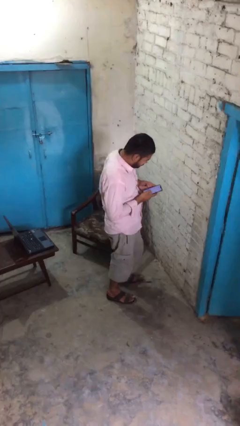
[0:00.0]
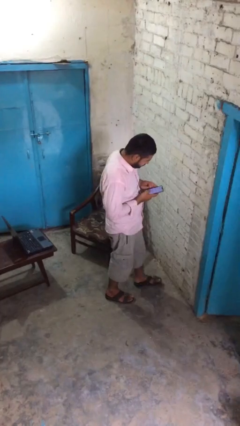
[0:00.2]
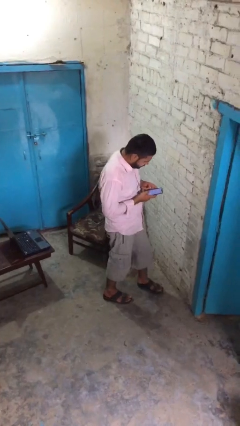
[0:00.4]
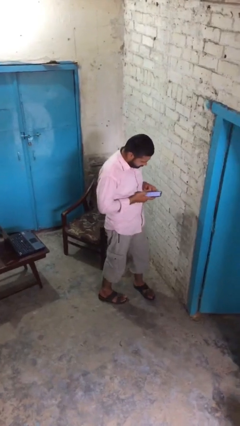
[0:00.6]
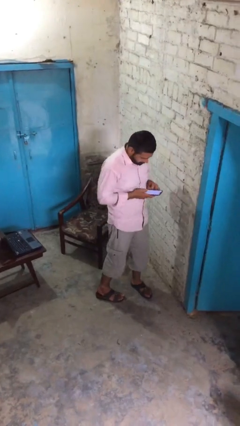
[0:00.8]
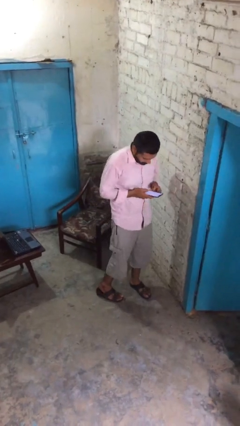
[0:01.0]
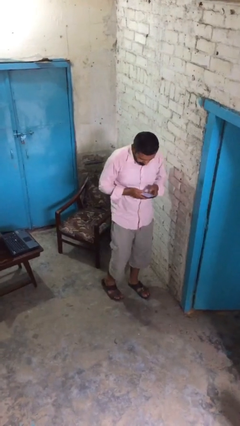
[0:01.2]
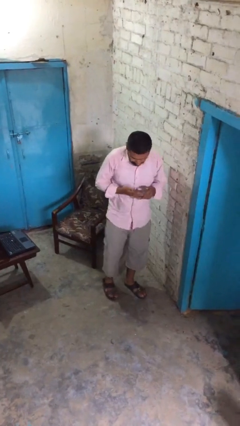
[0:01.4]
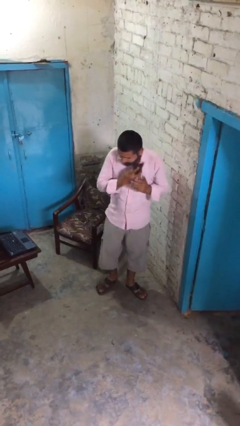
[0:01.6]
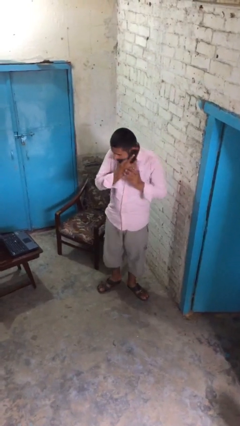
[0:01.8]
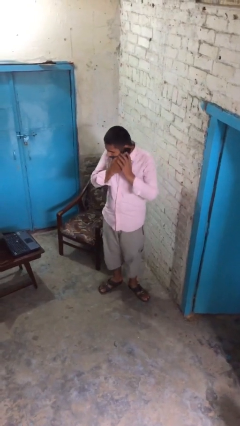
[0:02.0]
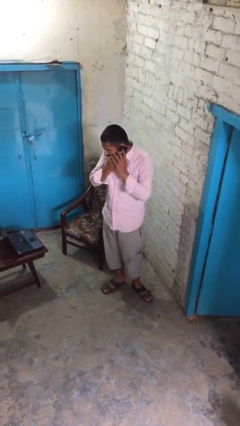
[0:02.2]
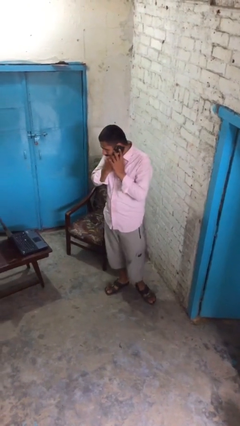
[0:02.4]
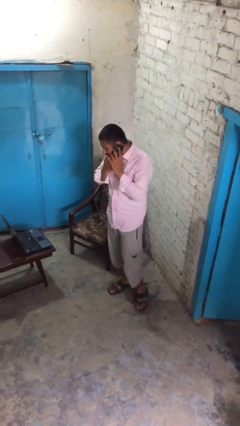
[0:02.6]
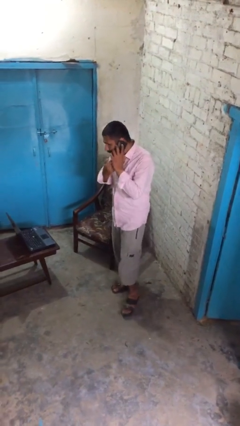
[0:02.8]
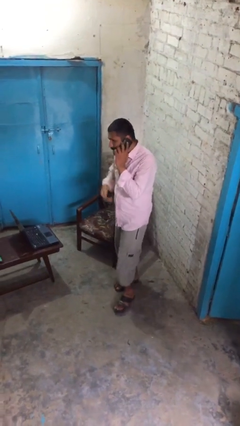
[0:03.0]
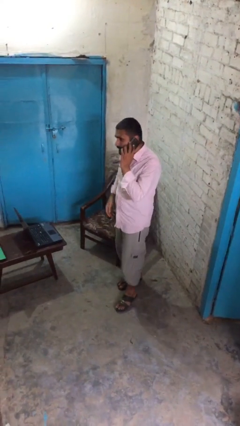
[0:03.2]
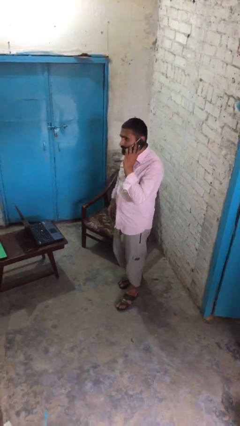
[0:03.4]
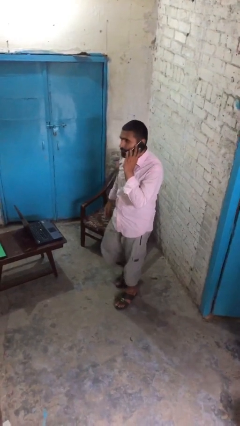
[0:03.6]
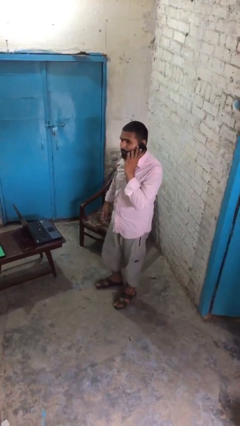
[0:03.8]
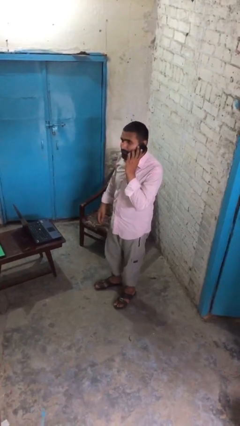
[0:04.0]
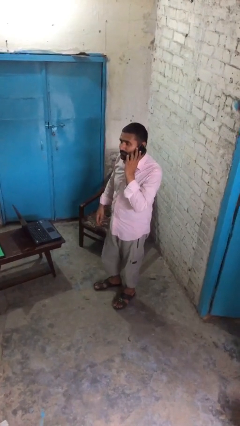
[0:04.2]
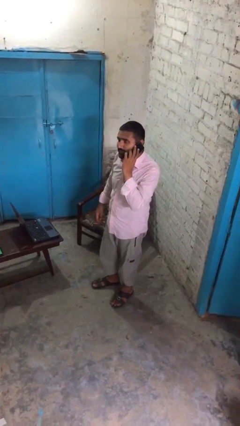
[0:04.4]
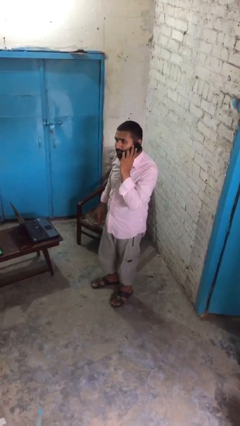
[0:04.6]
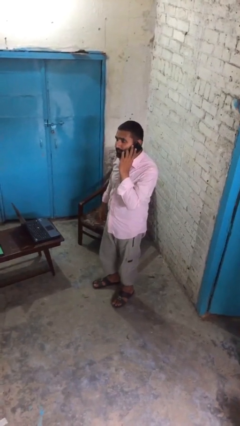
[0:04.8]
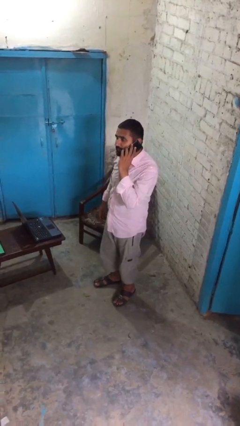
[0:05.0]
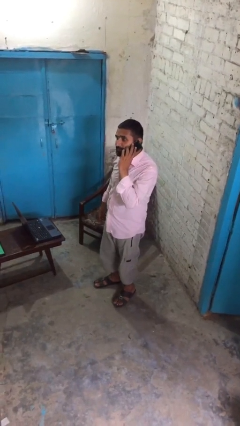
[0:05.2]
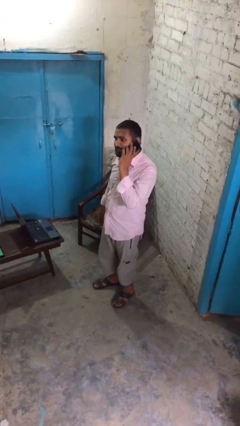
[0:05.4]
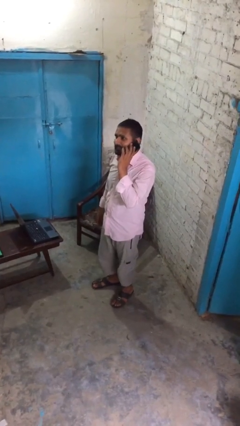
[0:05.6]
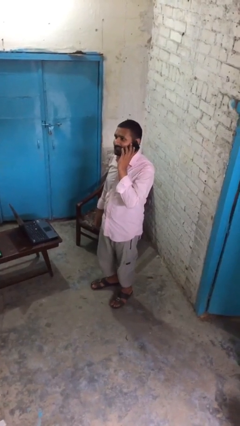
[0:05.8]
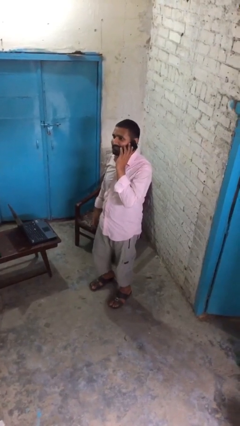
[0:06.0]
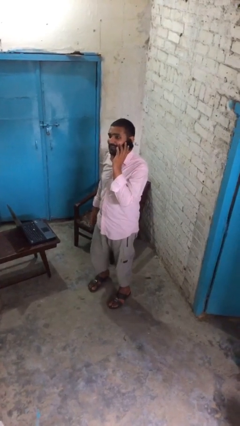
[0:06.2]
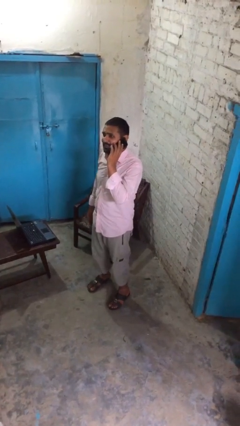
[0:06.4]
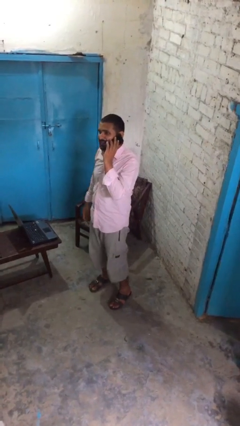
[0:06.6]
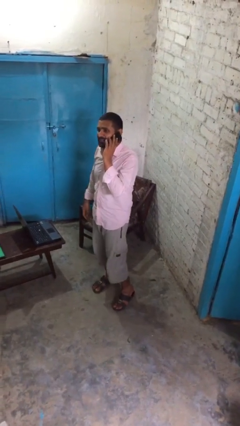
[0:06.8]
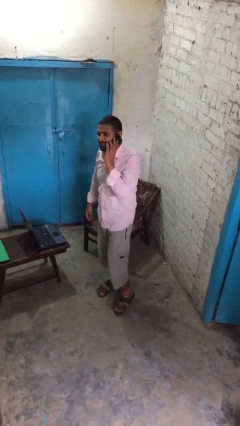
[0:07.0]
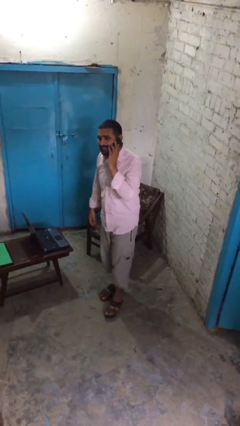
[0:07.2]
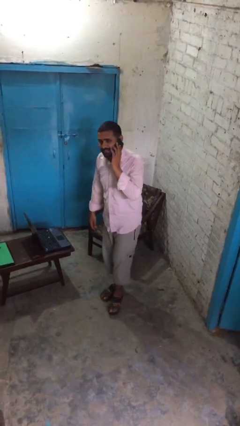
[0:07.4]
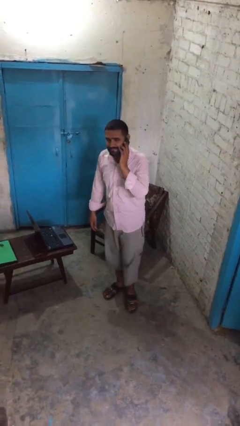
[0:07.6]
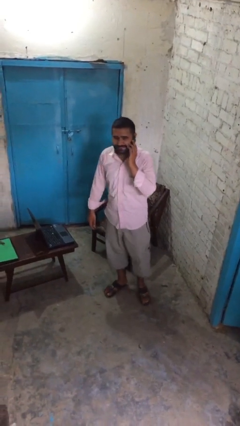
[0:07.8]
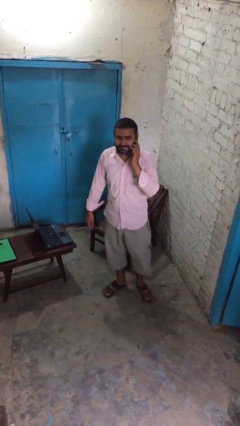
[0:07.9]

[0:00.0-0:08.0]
person talks on phone

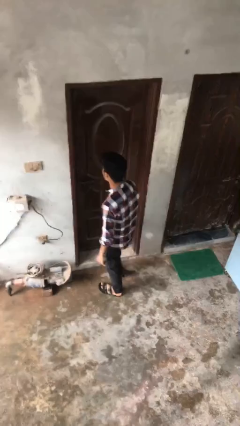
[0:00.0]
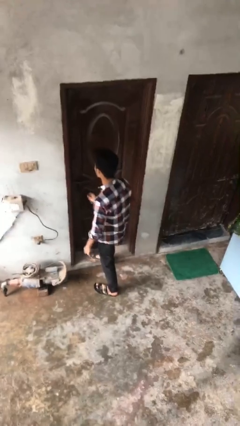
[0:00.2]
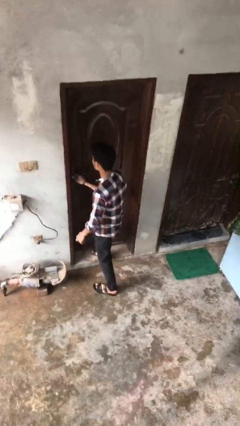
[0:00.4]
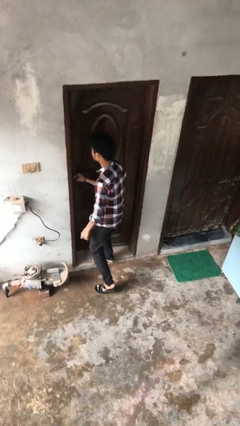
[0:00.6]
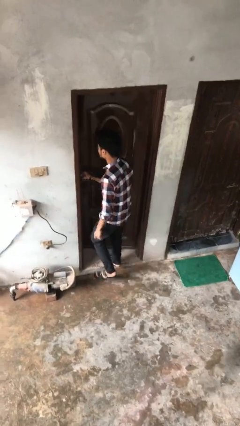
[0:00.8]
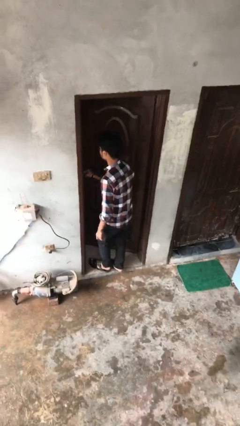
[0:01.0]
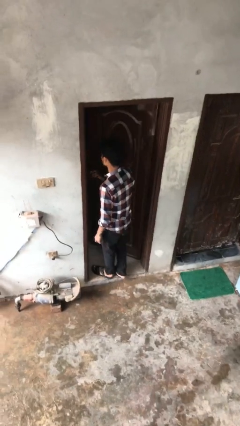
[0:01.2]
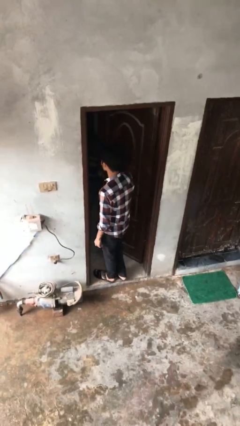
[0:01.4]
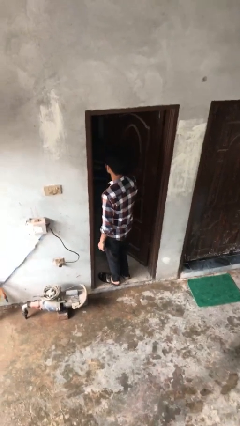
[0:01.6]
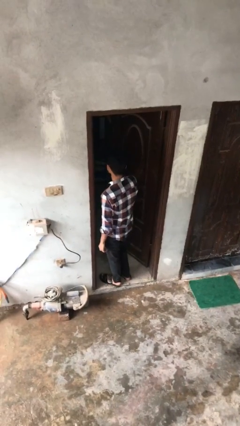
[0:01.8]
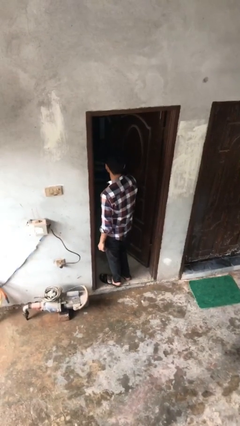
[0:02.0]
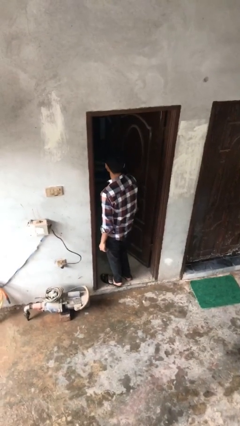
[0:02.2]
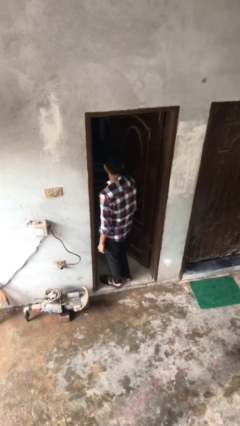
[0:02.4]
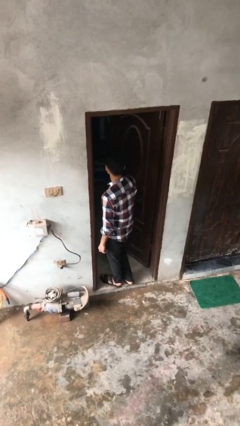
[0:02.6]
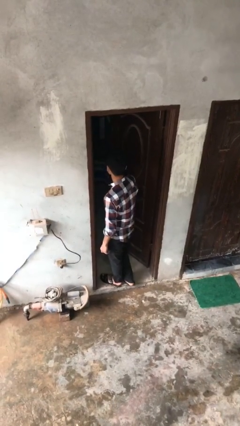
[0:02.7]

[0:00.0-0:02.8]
person opens facility door

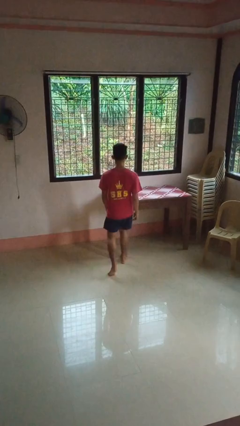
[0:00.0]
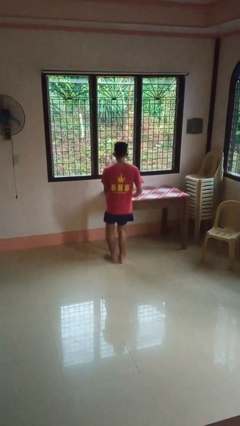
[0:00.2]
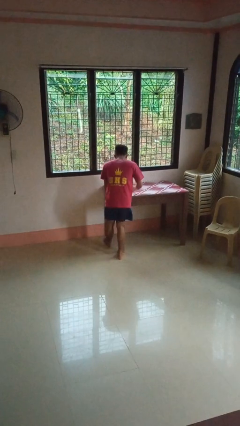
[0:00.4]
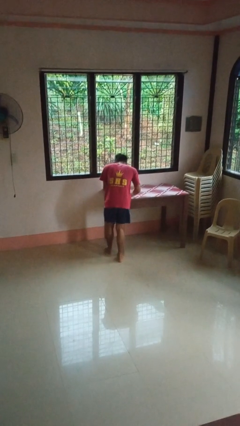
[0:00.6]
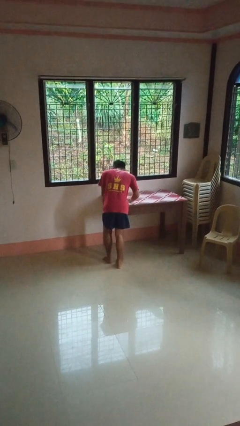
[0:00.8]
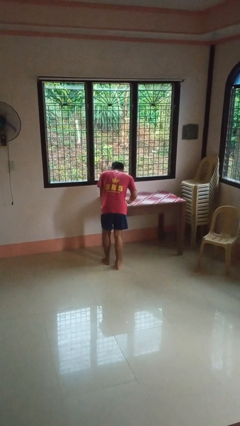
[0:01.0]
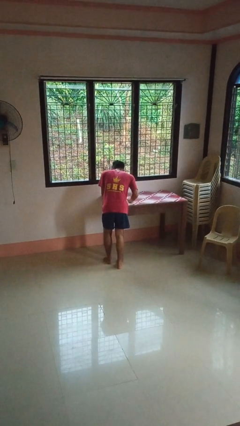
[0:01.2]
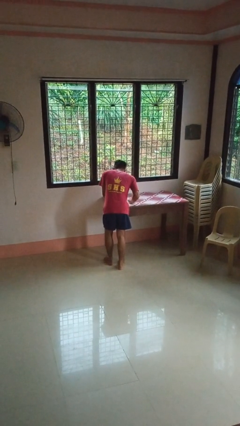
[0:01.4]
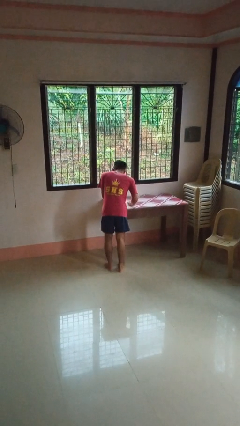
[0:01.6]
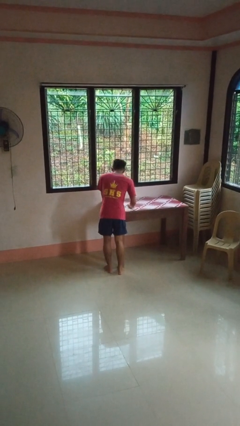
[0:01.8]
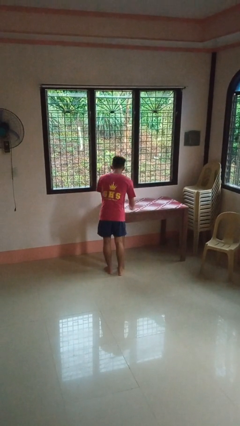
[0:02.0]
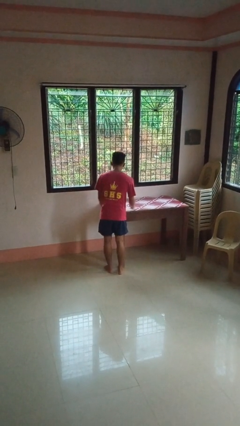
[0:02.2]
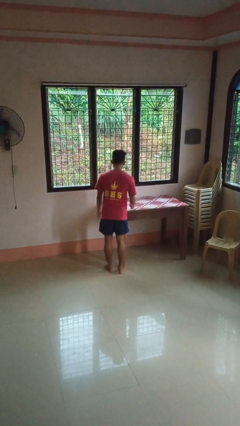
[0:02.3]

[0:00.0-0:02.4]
person bumps into table

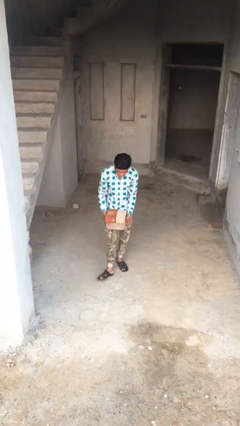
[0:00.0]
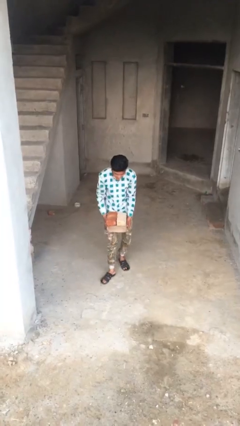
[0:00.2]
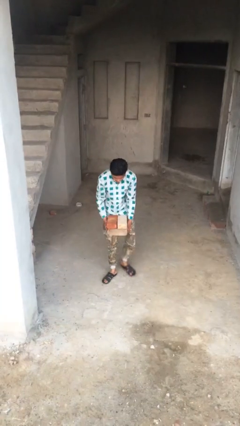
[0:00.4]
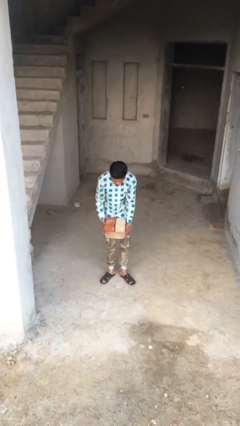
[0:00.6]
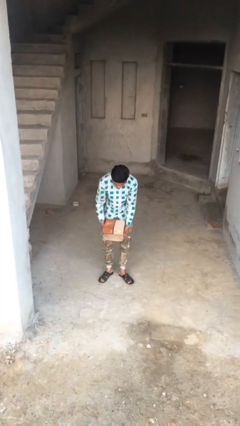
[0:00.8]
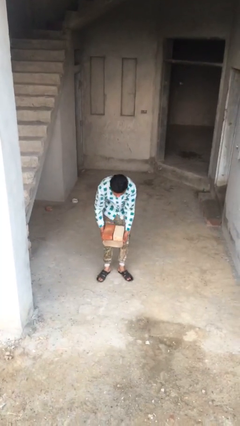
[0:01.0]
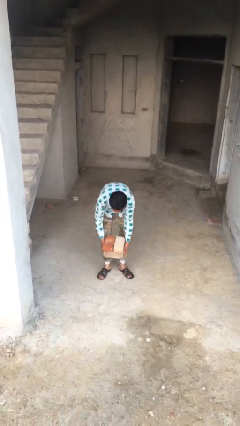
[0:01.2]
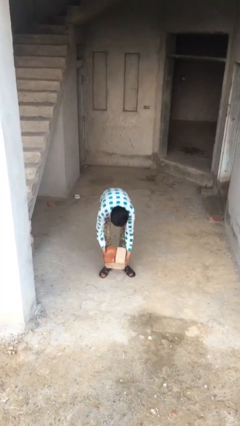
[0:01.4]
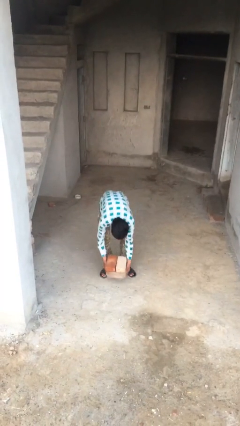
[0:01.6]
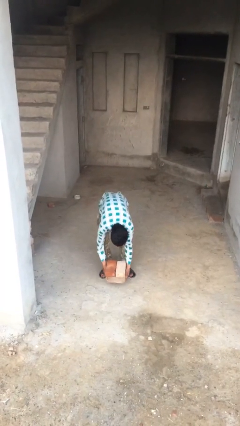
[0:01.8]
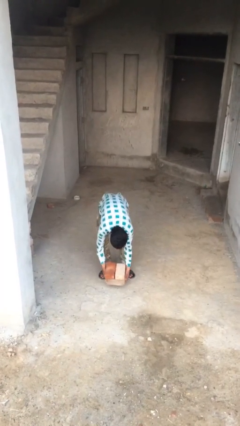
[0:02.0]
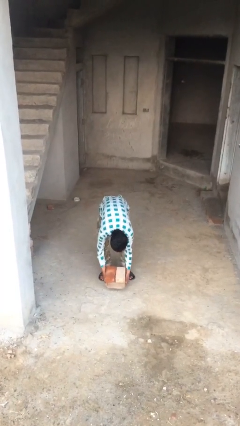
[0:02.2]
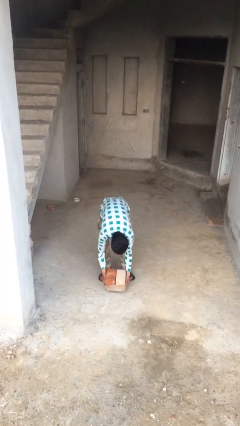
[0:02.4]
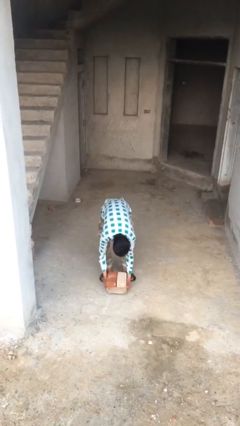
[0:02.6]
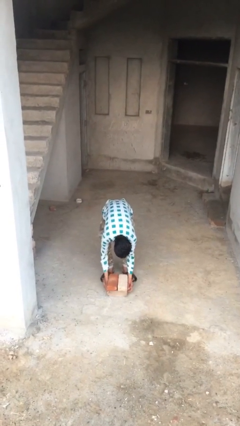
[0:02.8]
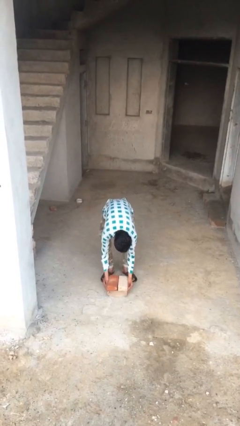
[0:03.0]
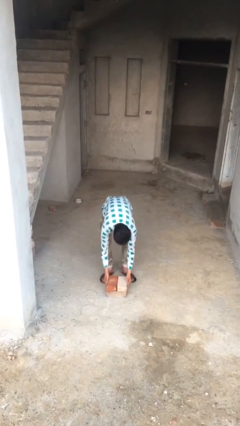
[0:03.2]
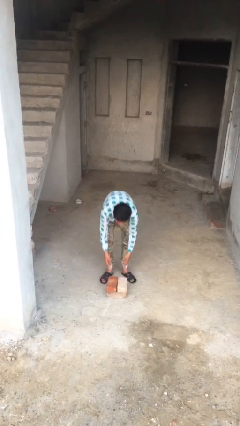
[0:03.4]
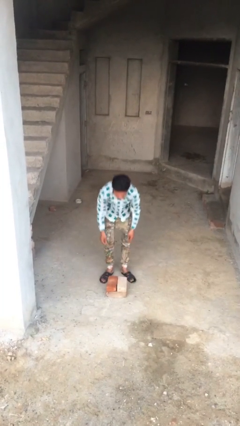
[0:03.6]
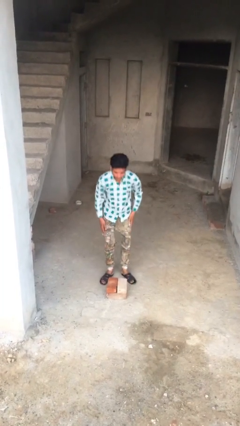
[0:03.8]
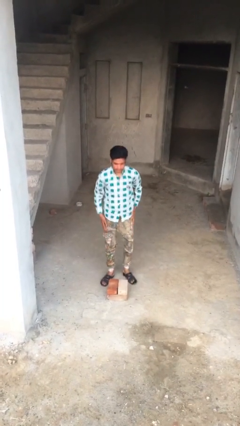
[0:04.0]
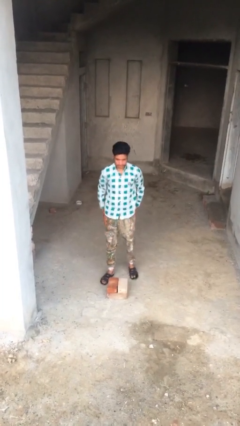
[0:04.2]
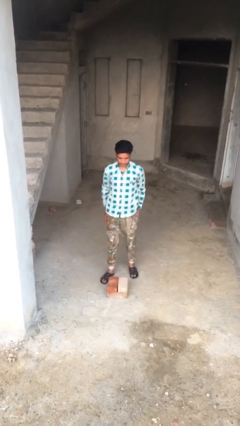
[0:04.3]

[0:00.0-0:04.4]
person puts down object on floor
